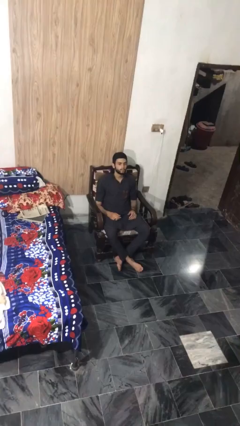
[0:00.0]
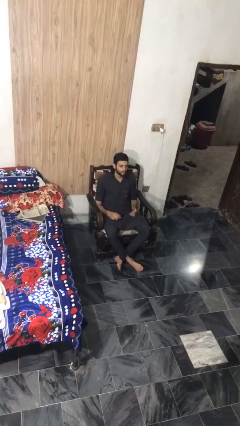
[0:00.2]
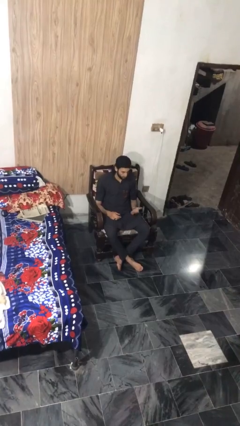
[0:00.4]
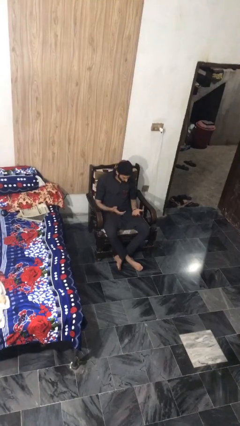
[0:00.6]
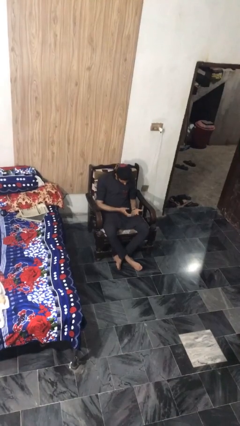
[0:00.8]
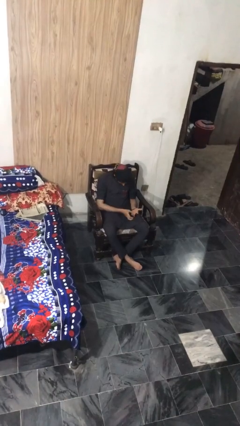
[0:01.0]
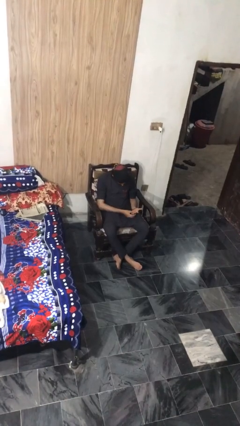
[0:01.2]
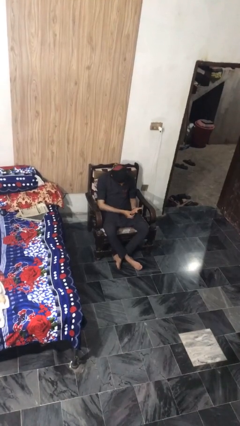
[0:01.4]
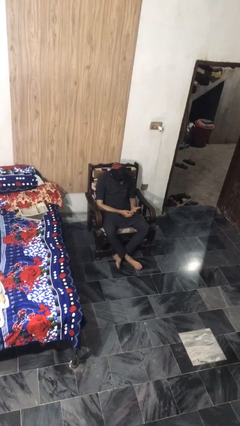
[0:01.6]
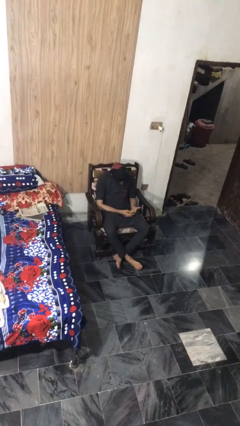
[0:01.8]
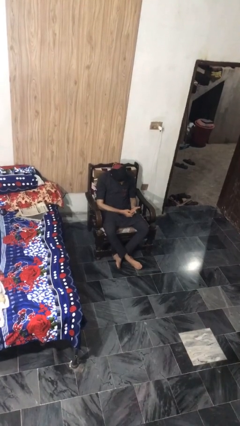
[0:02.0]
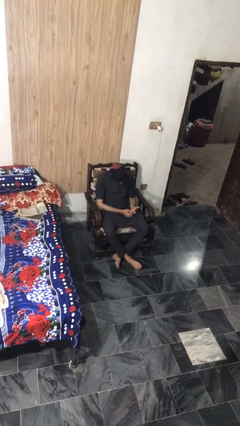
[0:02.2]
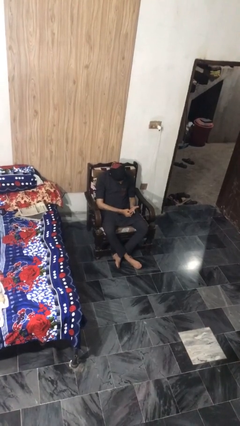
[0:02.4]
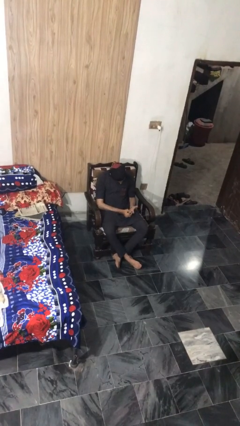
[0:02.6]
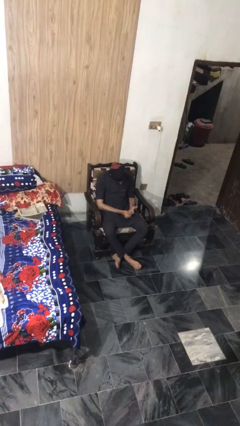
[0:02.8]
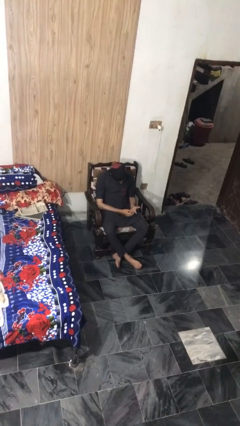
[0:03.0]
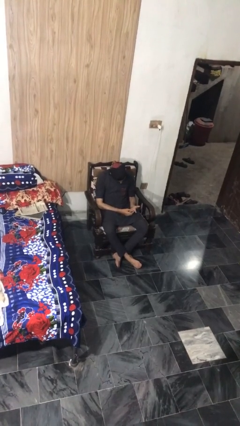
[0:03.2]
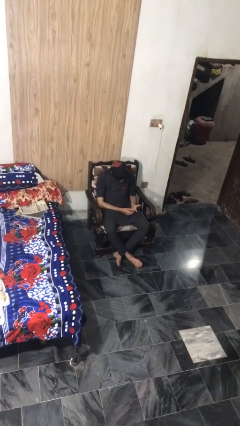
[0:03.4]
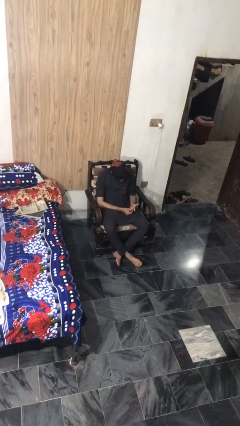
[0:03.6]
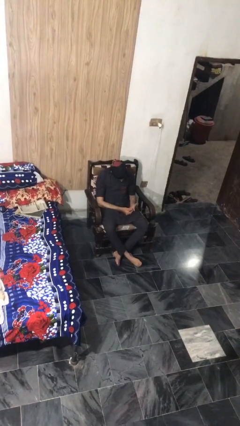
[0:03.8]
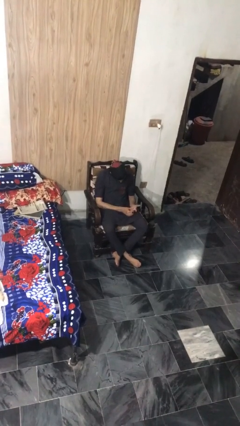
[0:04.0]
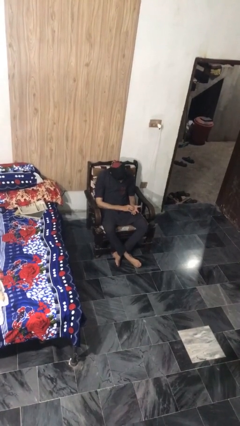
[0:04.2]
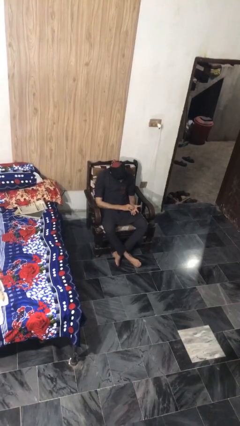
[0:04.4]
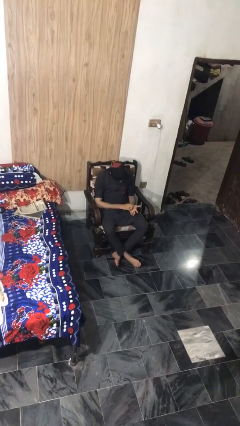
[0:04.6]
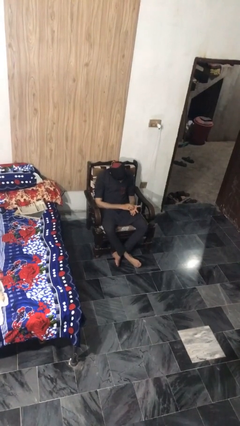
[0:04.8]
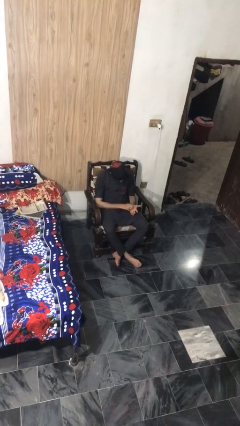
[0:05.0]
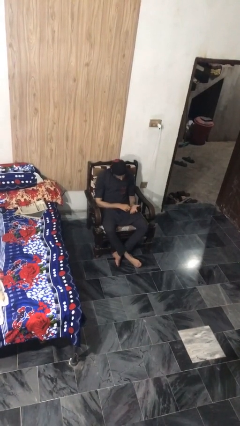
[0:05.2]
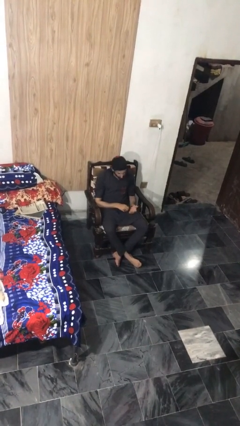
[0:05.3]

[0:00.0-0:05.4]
person looks at hands in lap

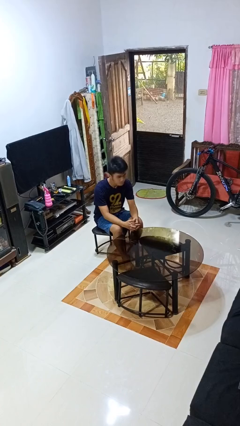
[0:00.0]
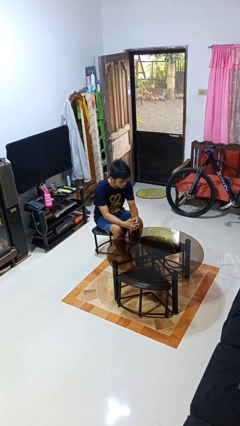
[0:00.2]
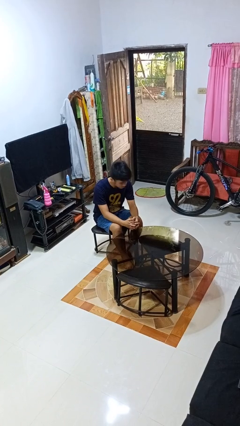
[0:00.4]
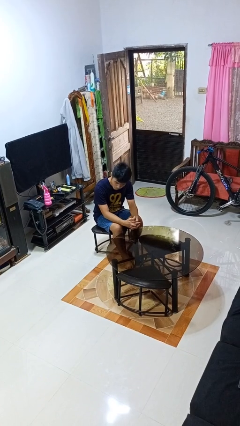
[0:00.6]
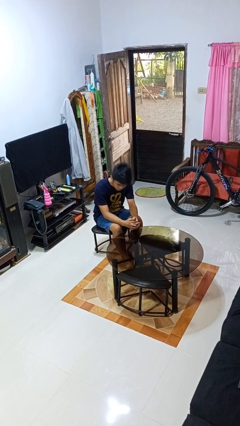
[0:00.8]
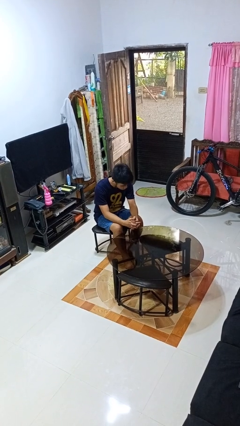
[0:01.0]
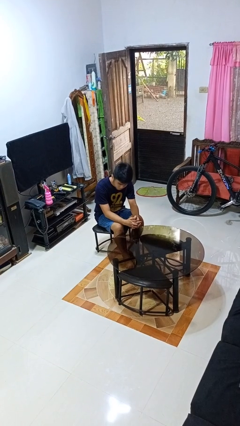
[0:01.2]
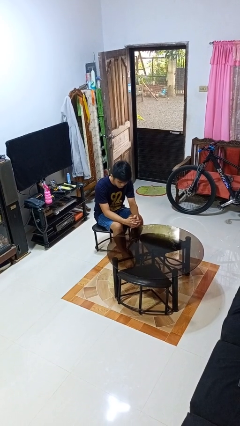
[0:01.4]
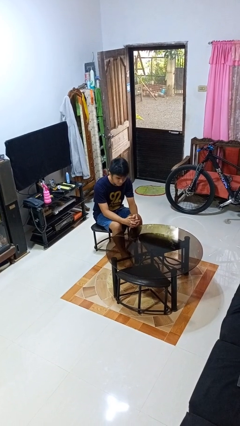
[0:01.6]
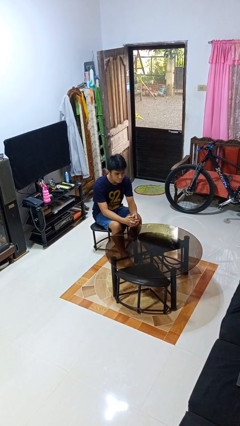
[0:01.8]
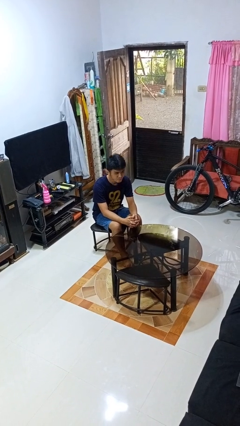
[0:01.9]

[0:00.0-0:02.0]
person shakes head

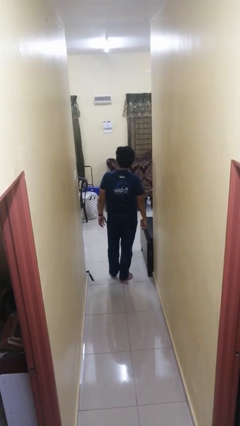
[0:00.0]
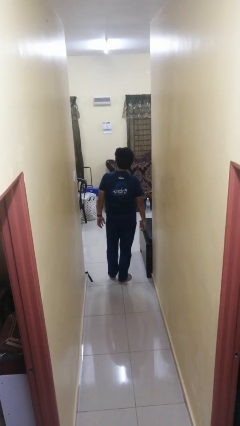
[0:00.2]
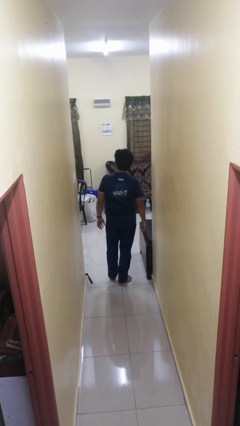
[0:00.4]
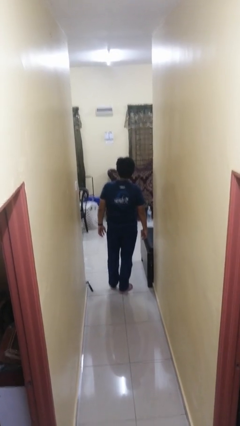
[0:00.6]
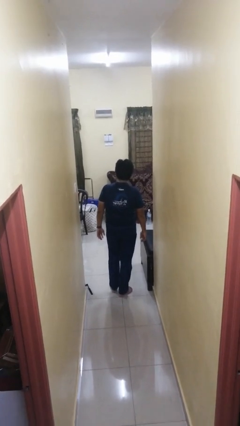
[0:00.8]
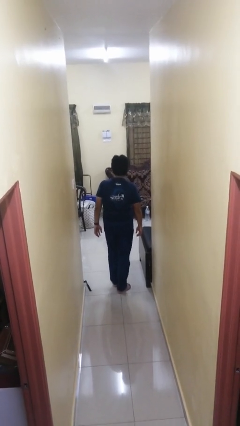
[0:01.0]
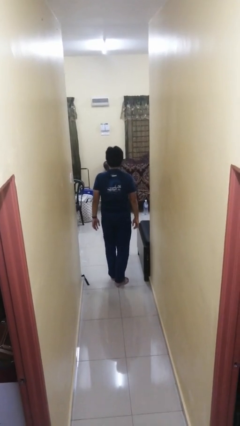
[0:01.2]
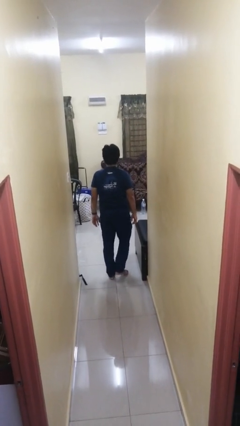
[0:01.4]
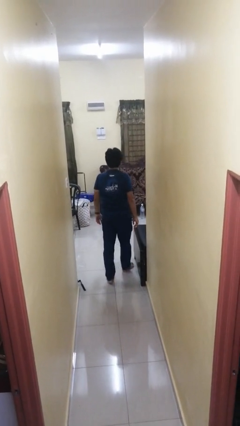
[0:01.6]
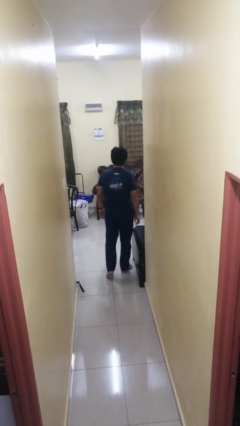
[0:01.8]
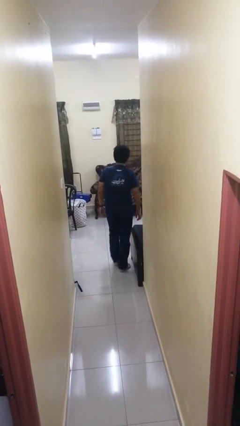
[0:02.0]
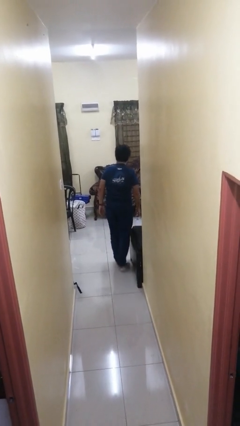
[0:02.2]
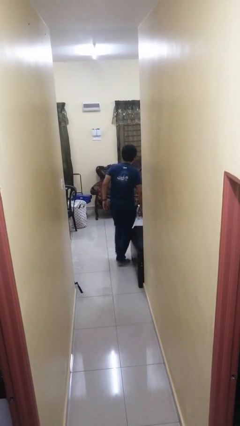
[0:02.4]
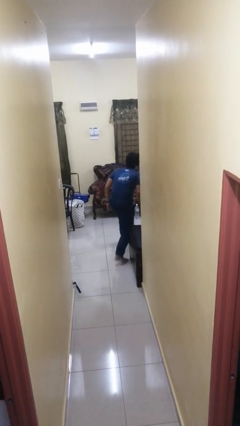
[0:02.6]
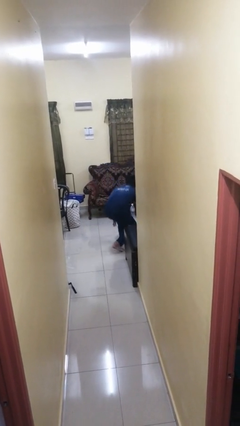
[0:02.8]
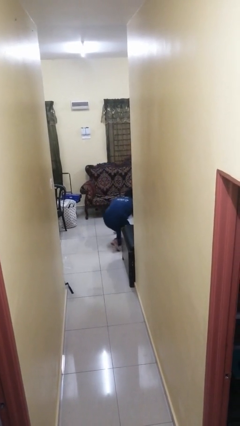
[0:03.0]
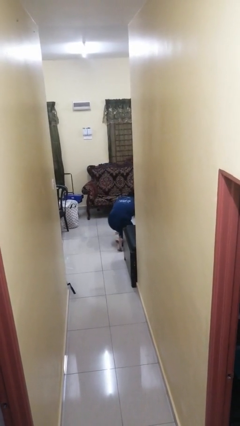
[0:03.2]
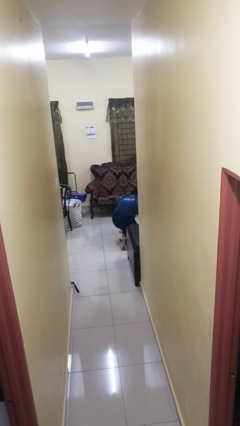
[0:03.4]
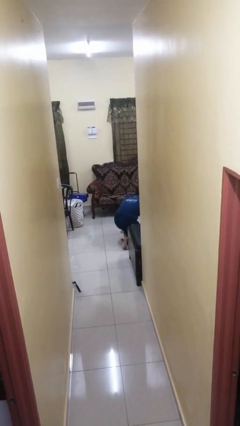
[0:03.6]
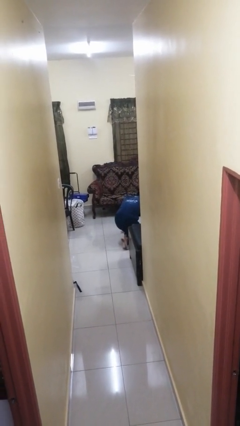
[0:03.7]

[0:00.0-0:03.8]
person trips on object on floor

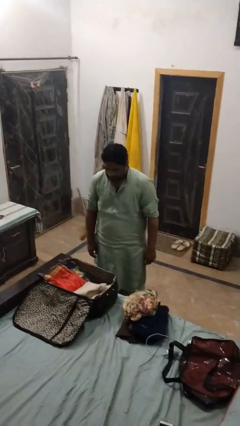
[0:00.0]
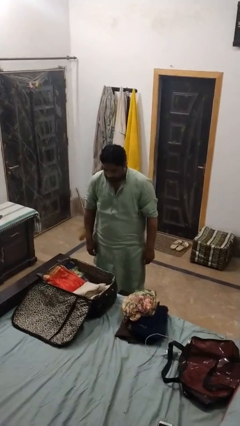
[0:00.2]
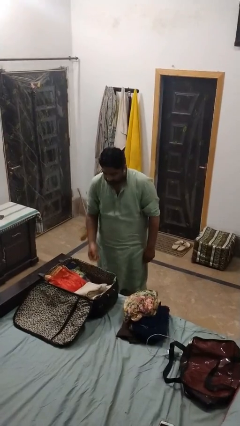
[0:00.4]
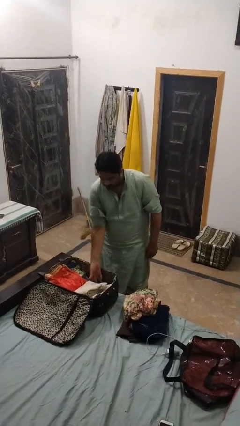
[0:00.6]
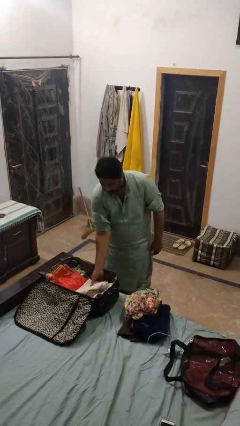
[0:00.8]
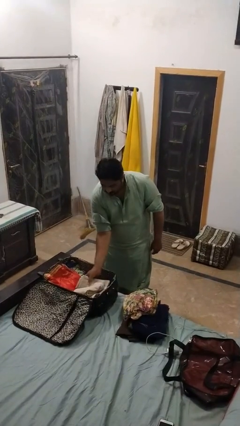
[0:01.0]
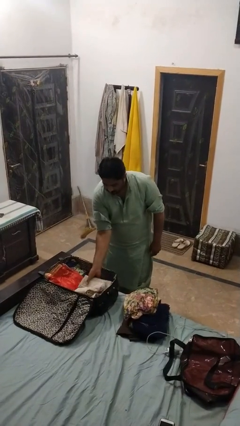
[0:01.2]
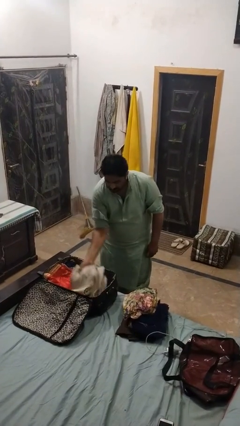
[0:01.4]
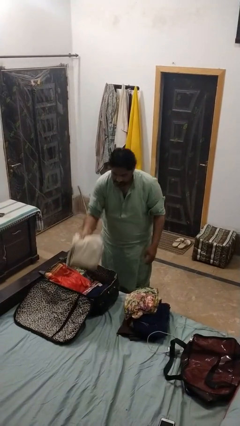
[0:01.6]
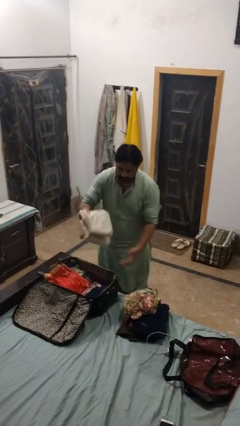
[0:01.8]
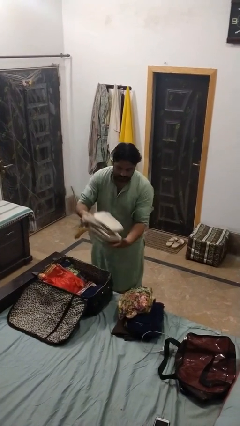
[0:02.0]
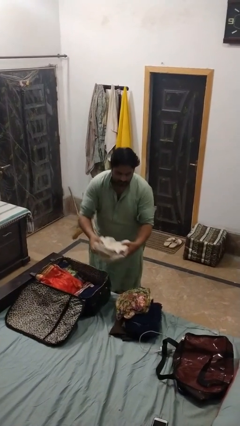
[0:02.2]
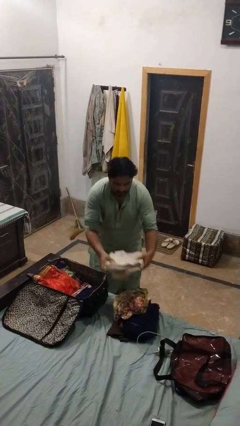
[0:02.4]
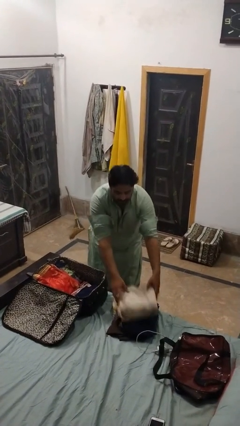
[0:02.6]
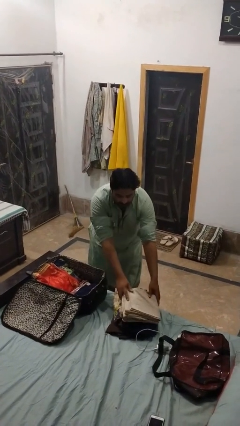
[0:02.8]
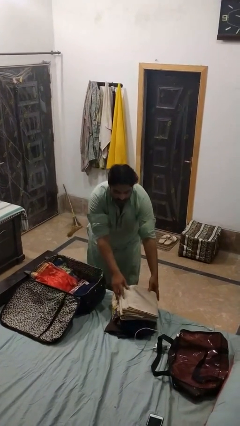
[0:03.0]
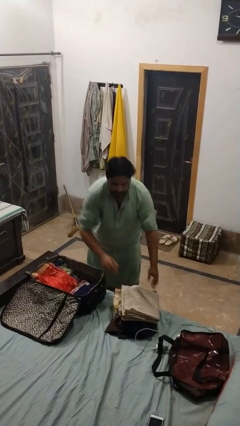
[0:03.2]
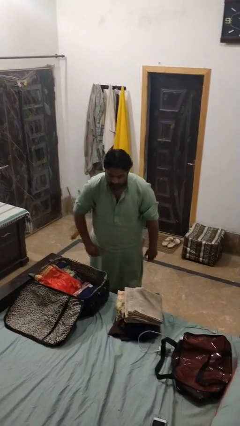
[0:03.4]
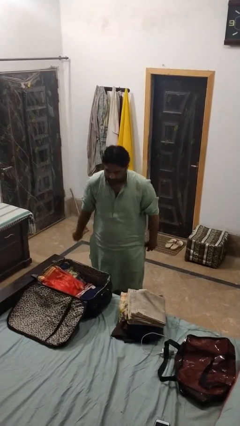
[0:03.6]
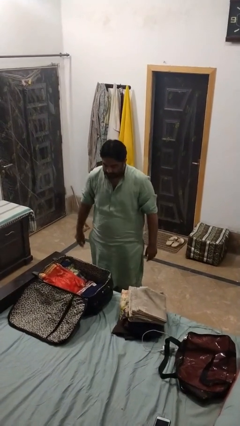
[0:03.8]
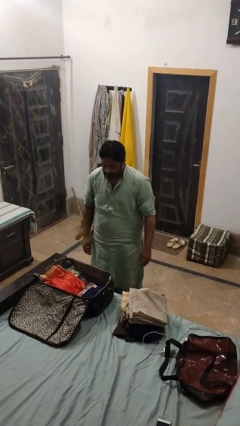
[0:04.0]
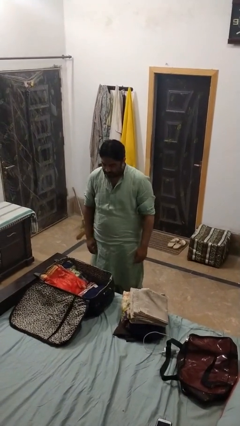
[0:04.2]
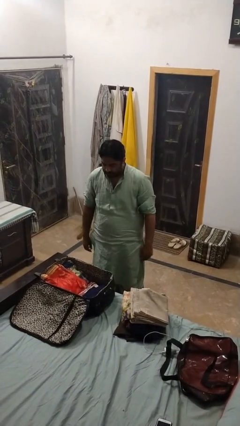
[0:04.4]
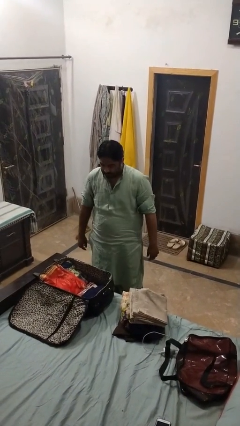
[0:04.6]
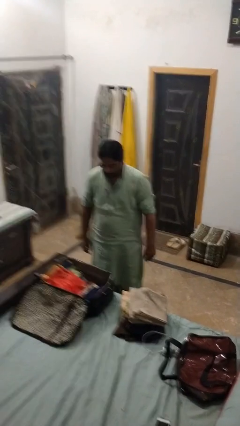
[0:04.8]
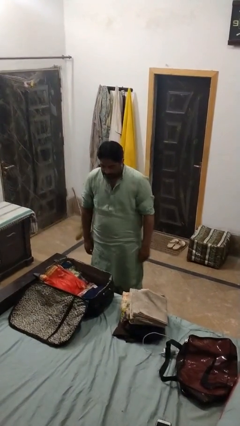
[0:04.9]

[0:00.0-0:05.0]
person unloads clothes from suitcase

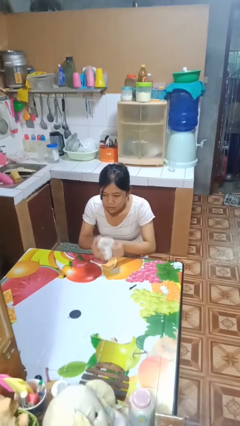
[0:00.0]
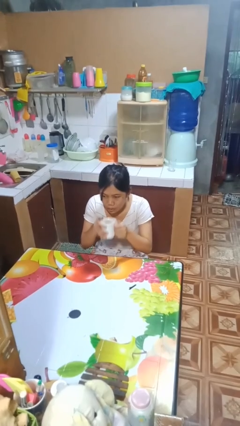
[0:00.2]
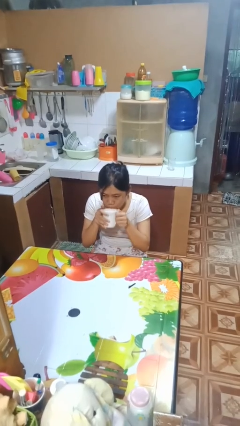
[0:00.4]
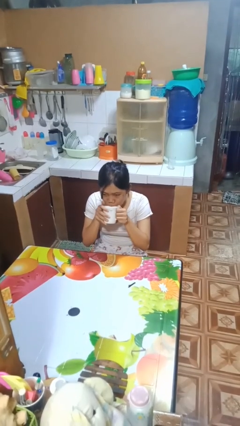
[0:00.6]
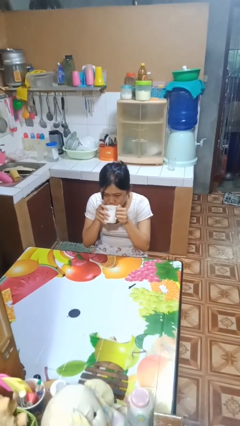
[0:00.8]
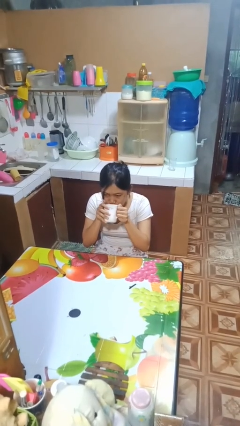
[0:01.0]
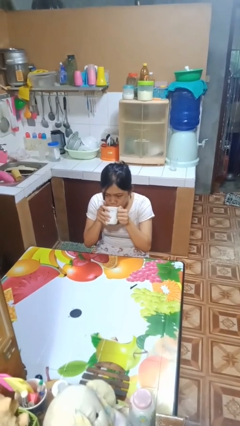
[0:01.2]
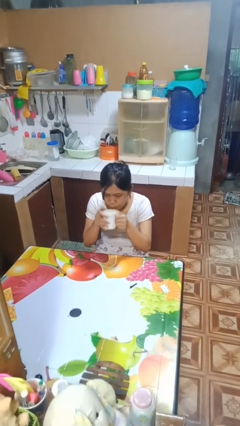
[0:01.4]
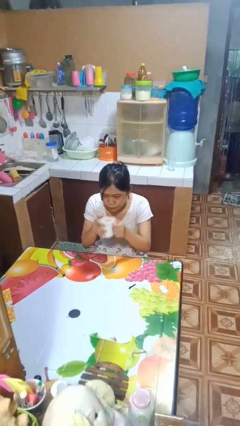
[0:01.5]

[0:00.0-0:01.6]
person drinks from mug
